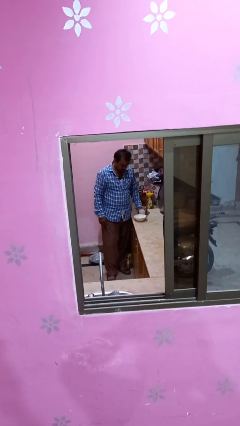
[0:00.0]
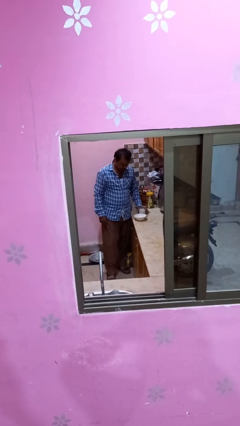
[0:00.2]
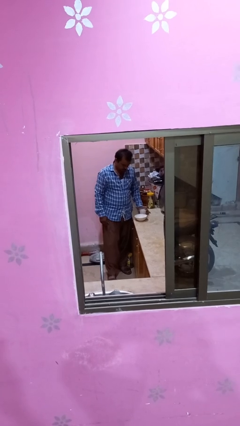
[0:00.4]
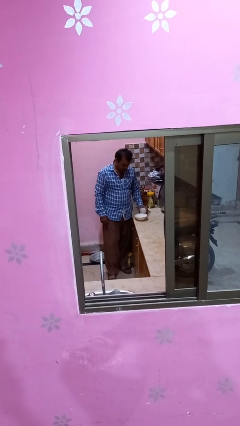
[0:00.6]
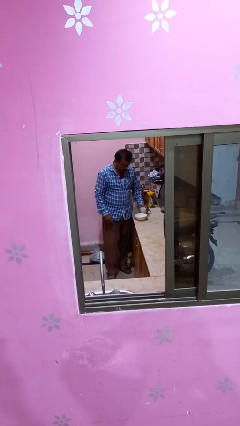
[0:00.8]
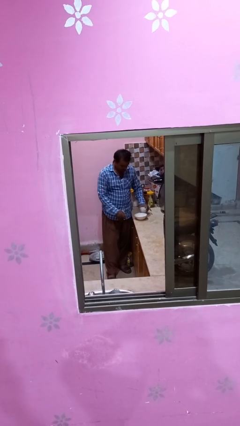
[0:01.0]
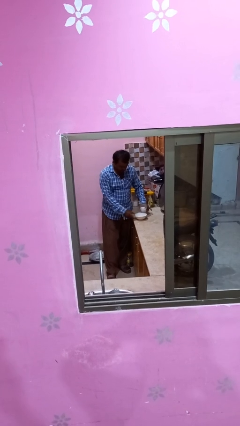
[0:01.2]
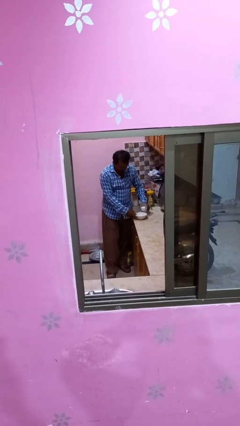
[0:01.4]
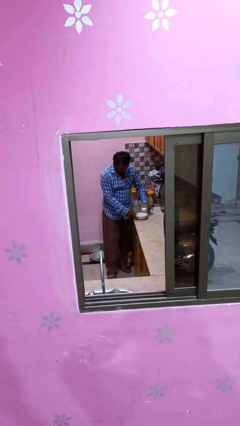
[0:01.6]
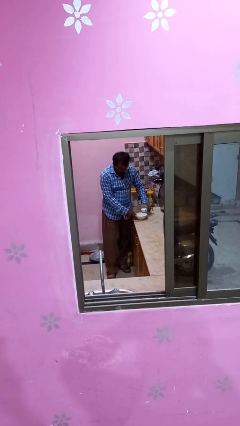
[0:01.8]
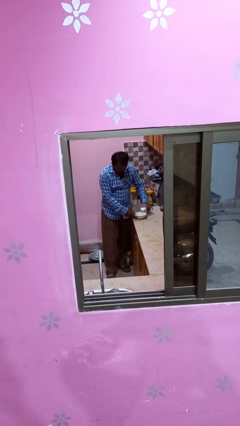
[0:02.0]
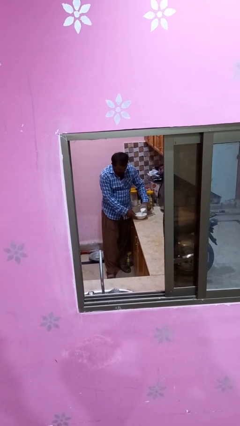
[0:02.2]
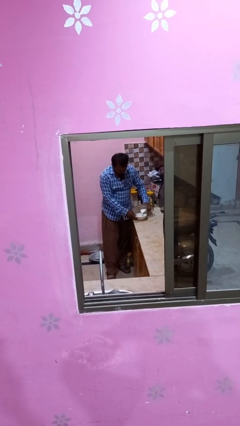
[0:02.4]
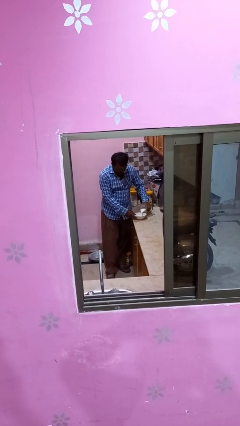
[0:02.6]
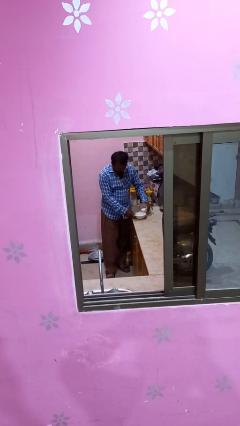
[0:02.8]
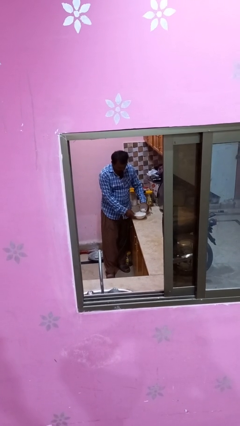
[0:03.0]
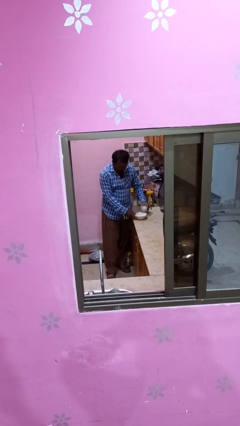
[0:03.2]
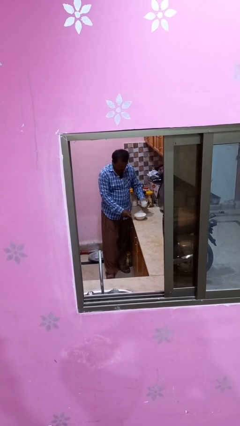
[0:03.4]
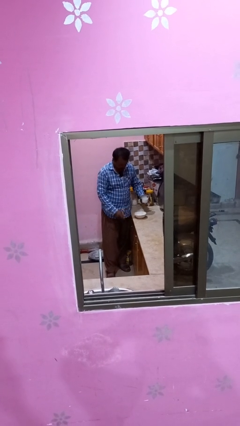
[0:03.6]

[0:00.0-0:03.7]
person pours into bowl

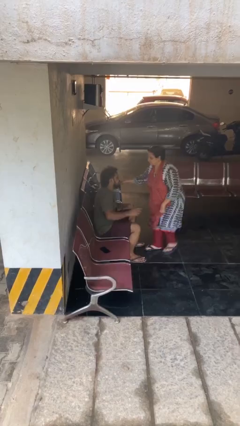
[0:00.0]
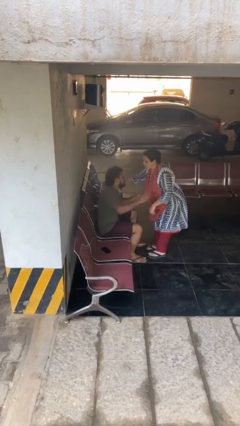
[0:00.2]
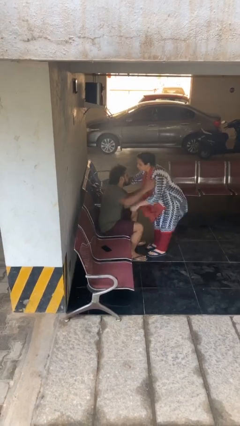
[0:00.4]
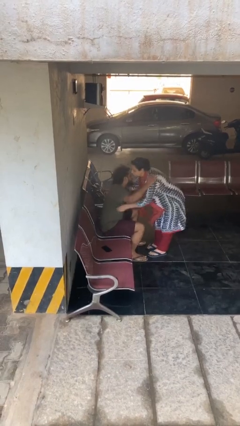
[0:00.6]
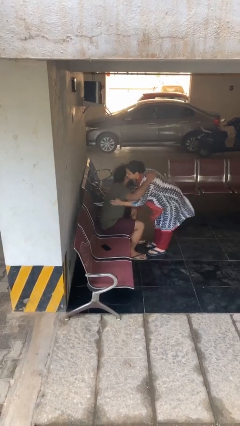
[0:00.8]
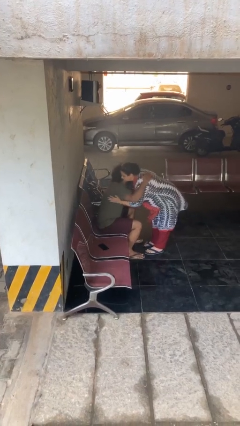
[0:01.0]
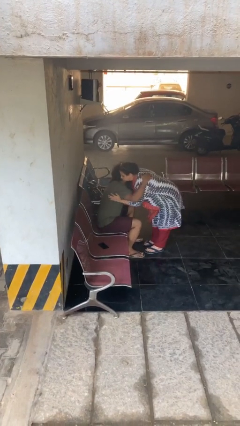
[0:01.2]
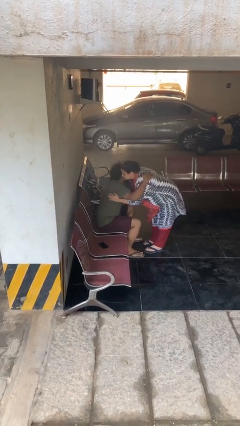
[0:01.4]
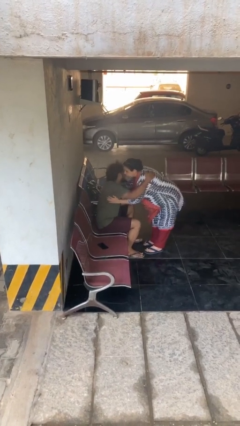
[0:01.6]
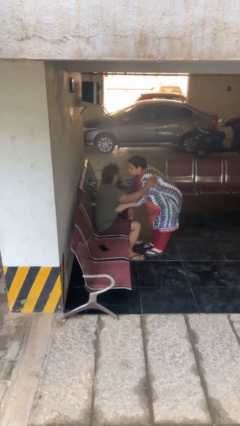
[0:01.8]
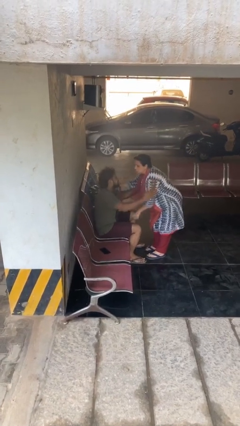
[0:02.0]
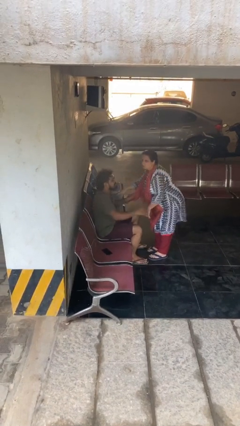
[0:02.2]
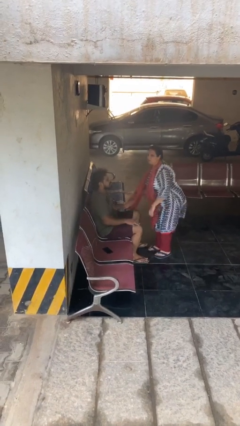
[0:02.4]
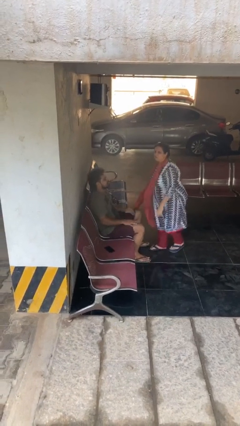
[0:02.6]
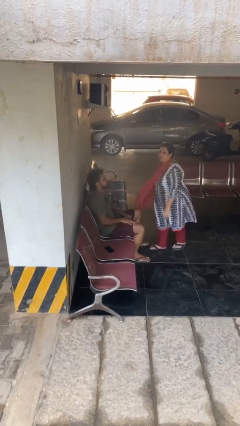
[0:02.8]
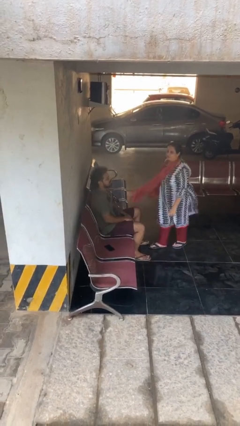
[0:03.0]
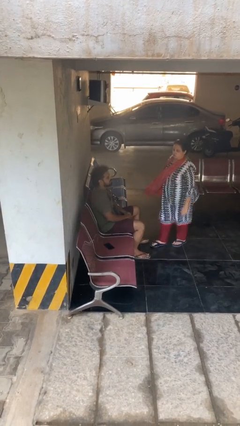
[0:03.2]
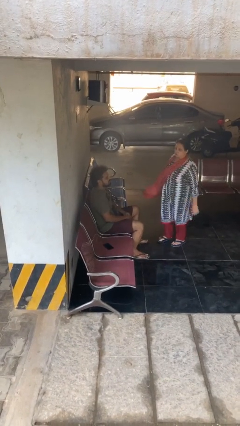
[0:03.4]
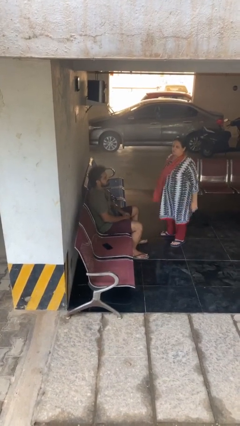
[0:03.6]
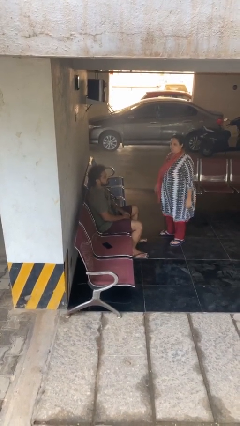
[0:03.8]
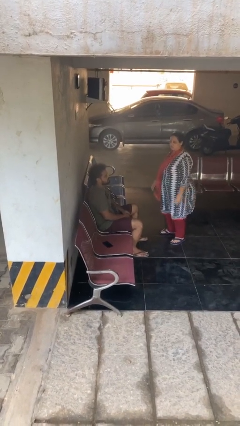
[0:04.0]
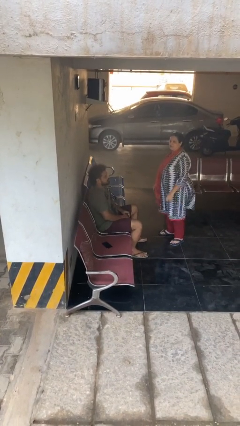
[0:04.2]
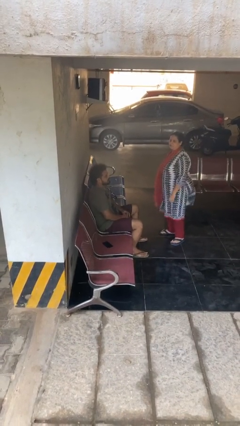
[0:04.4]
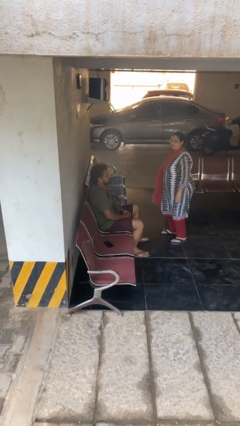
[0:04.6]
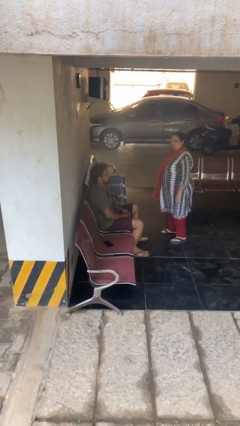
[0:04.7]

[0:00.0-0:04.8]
person embraces person

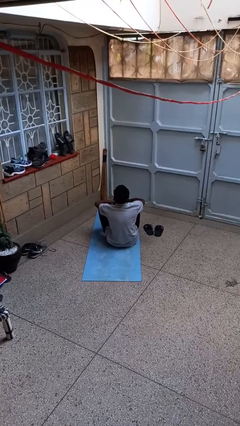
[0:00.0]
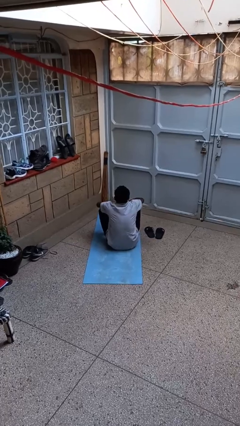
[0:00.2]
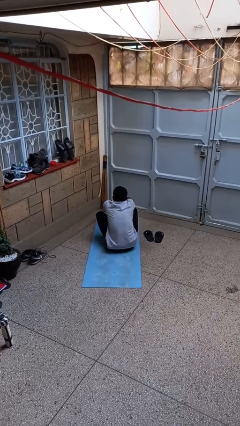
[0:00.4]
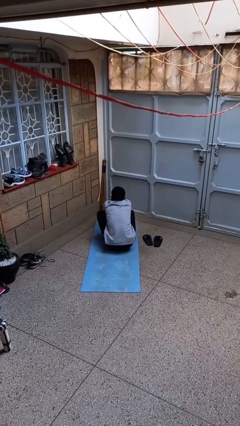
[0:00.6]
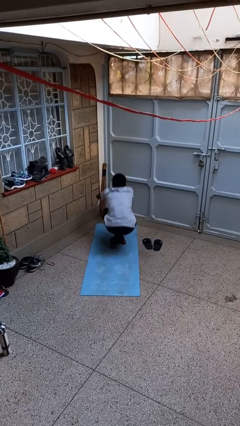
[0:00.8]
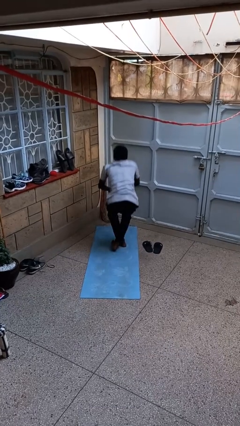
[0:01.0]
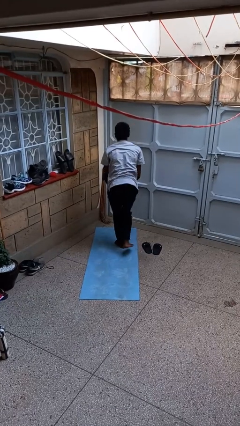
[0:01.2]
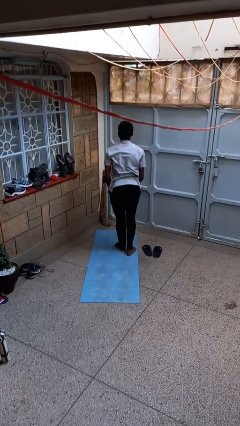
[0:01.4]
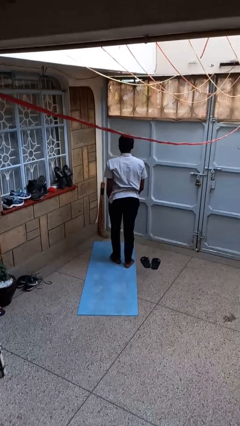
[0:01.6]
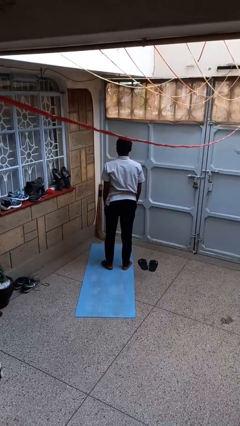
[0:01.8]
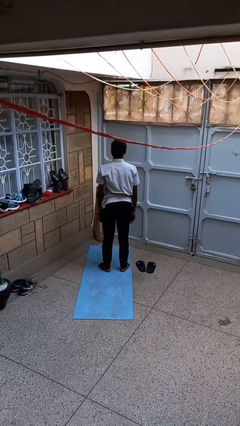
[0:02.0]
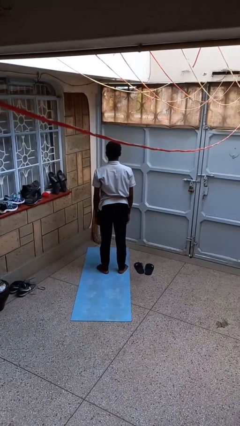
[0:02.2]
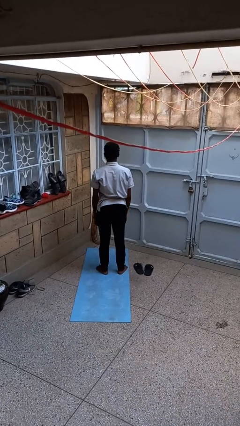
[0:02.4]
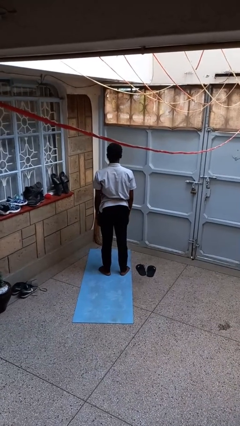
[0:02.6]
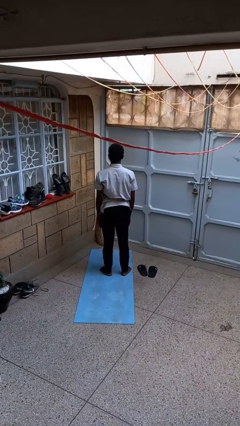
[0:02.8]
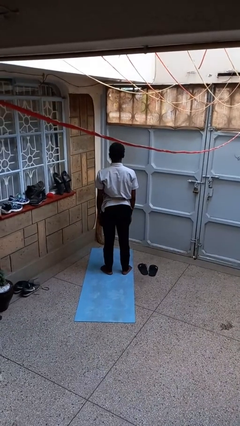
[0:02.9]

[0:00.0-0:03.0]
person stands up from floor

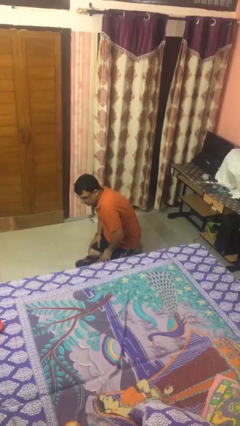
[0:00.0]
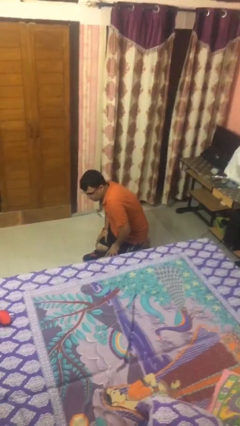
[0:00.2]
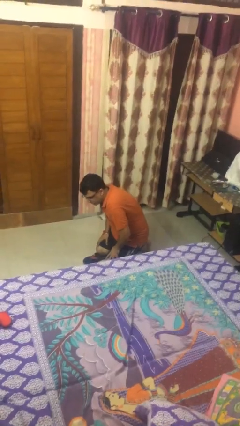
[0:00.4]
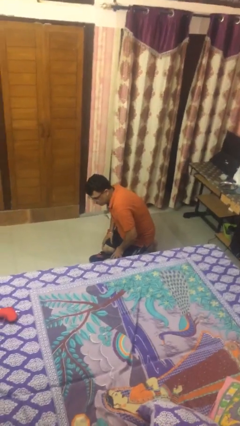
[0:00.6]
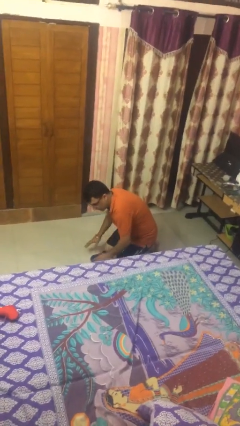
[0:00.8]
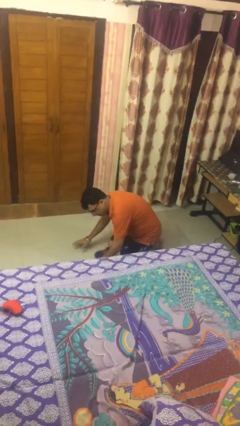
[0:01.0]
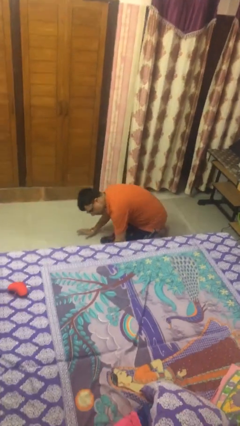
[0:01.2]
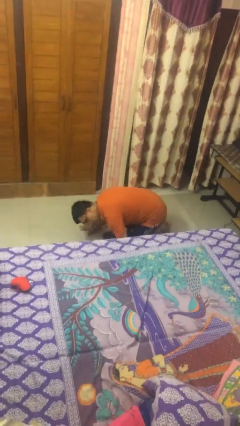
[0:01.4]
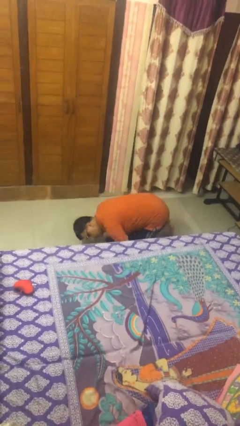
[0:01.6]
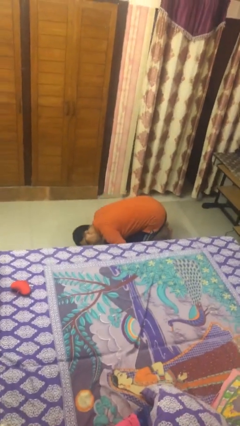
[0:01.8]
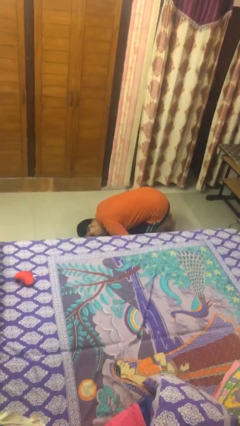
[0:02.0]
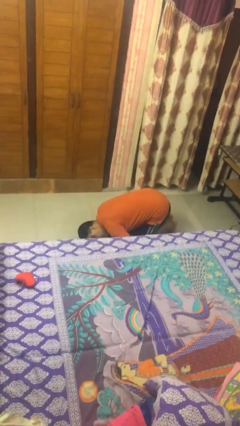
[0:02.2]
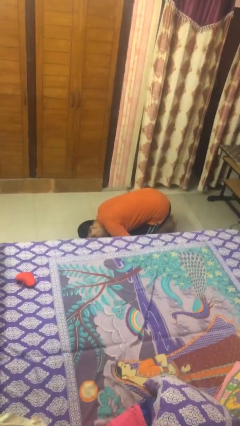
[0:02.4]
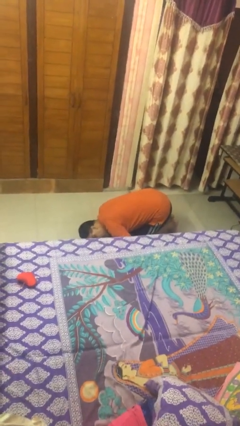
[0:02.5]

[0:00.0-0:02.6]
person searches under bed

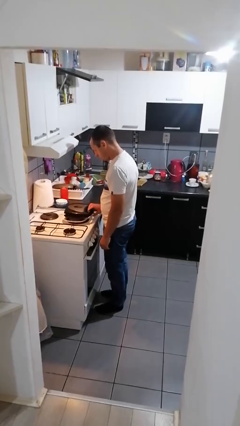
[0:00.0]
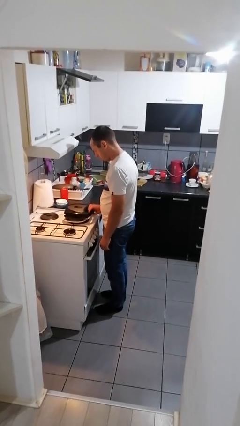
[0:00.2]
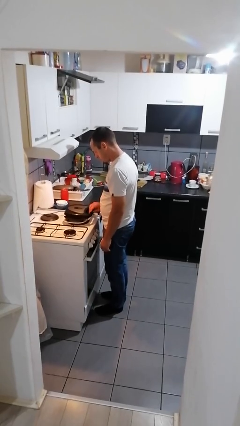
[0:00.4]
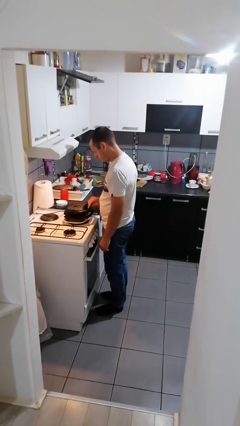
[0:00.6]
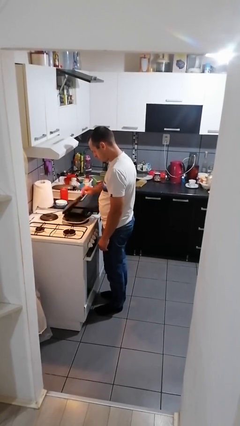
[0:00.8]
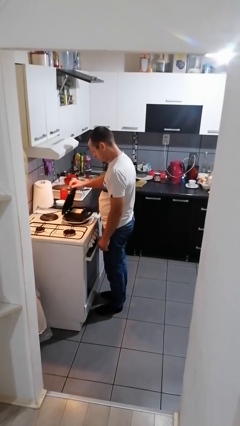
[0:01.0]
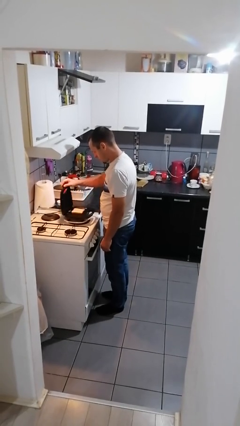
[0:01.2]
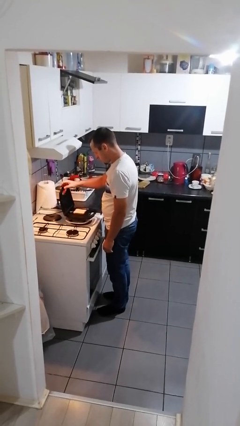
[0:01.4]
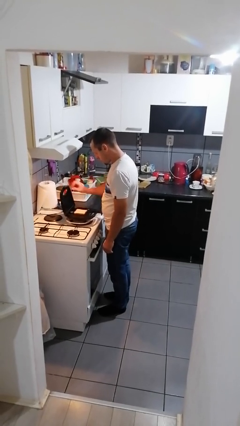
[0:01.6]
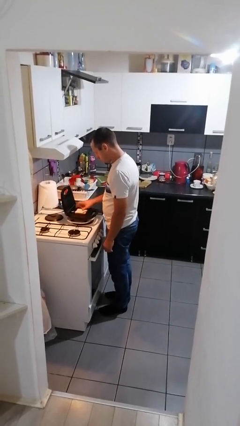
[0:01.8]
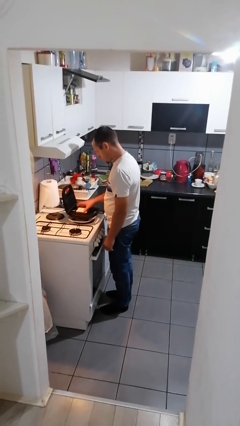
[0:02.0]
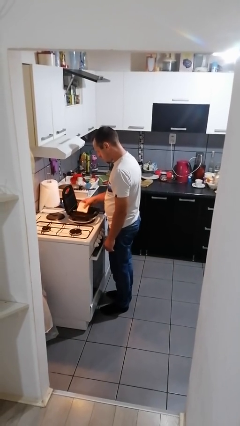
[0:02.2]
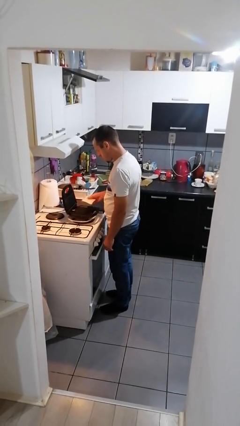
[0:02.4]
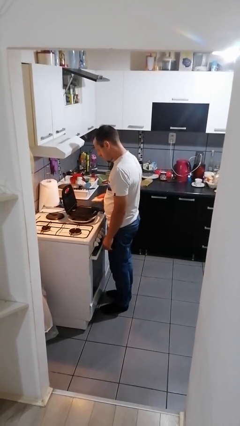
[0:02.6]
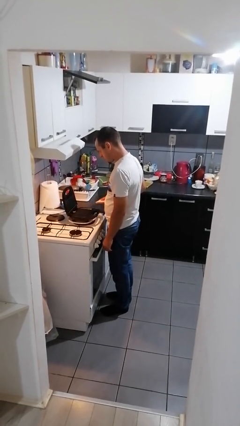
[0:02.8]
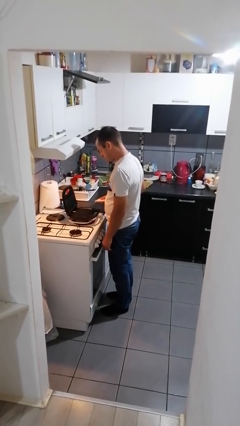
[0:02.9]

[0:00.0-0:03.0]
person takes object from toaster

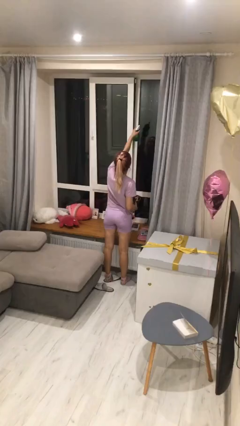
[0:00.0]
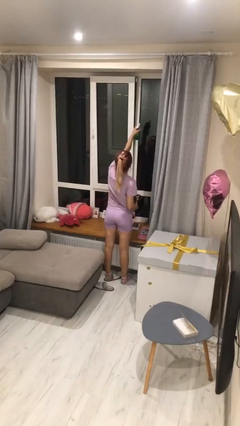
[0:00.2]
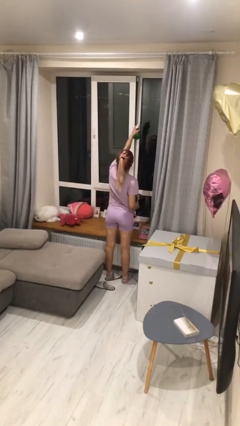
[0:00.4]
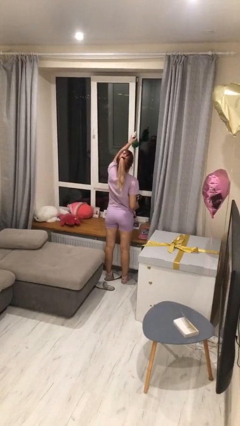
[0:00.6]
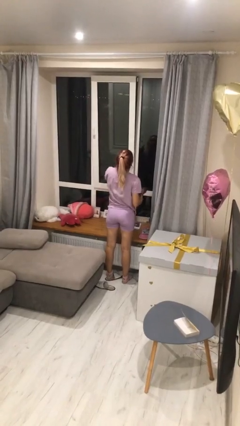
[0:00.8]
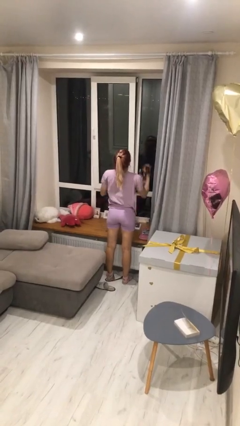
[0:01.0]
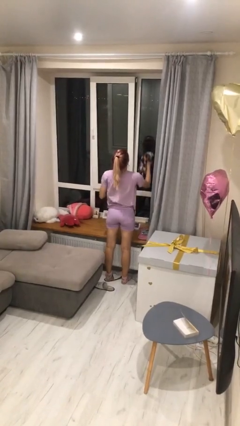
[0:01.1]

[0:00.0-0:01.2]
person sprays from bottle
